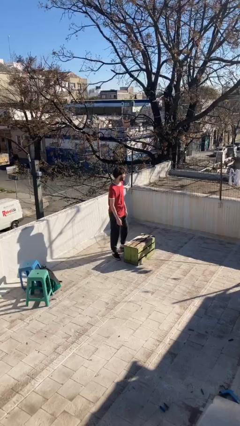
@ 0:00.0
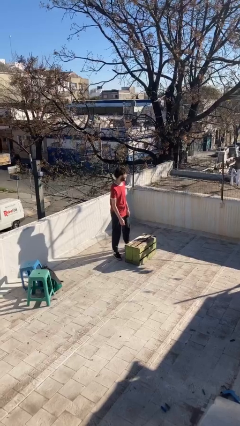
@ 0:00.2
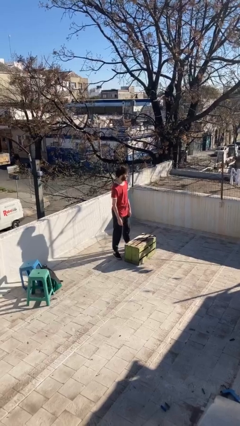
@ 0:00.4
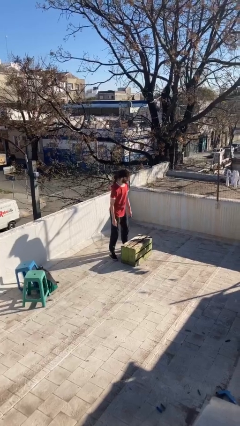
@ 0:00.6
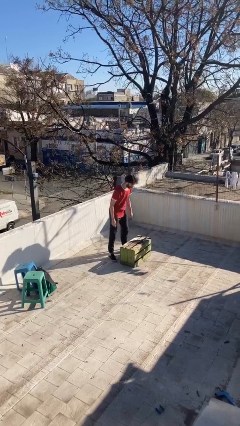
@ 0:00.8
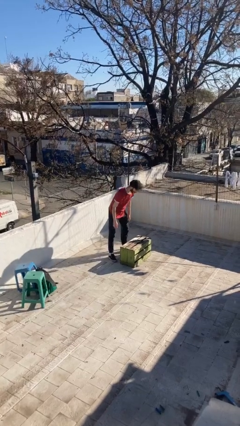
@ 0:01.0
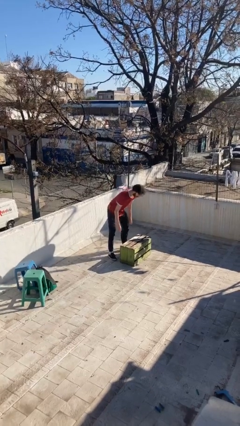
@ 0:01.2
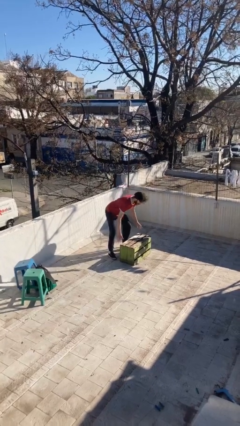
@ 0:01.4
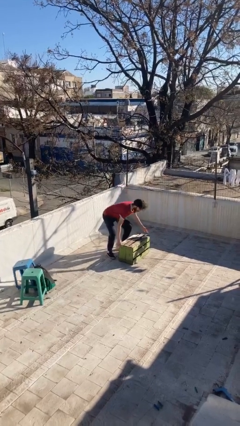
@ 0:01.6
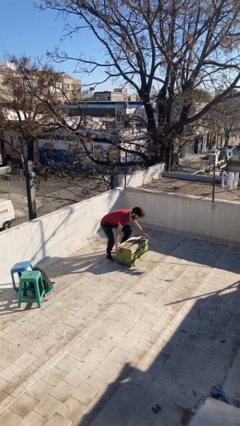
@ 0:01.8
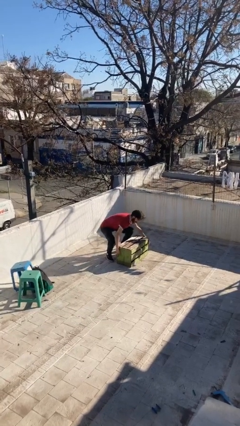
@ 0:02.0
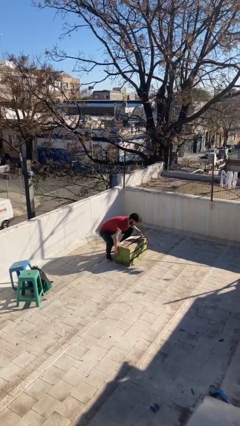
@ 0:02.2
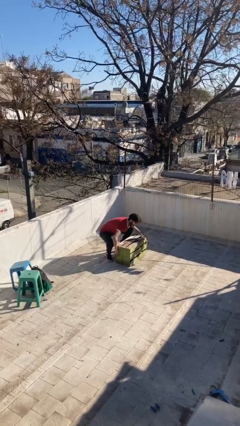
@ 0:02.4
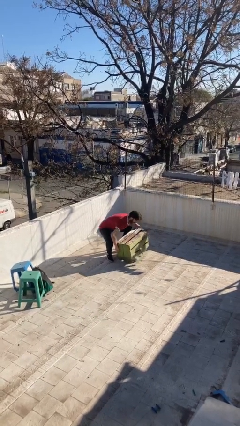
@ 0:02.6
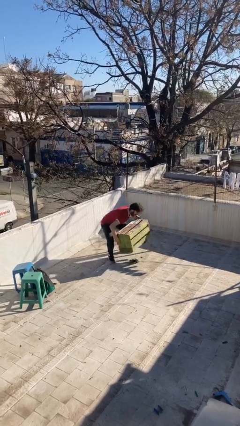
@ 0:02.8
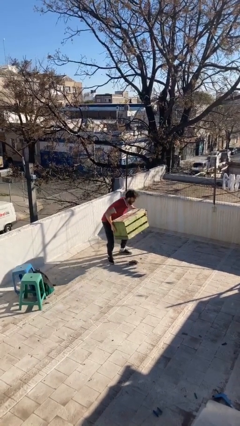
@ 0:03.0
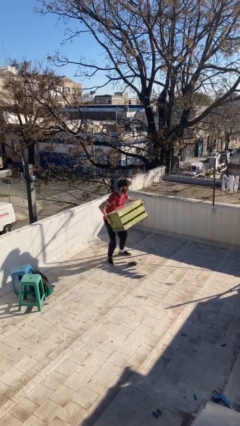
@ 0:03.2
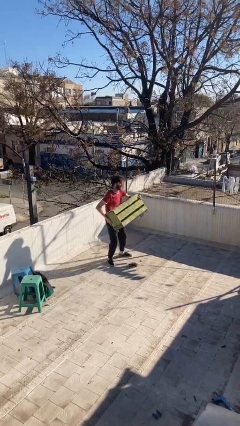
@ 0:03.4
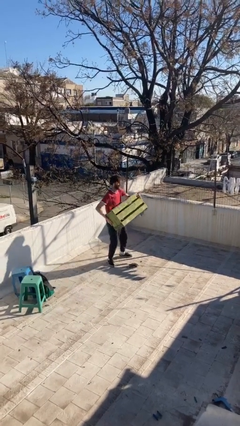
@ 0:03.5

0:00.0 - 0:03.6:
person picks up object from floor

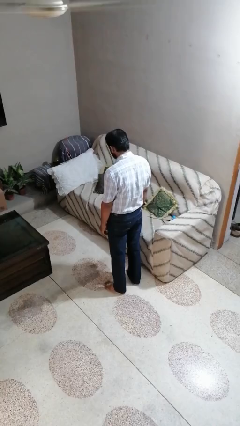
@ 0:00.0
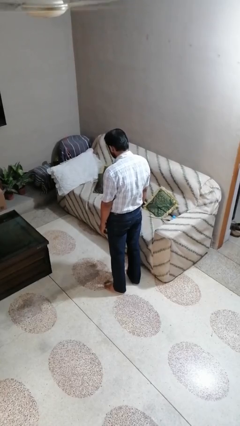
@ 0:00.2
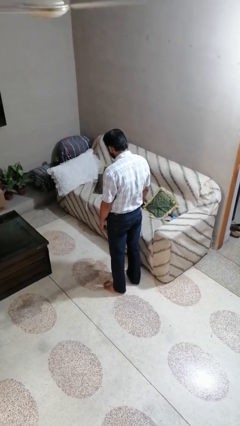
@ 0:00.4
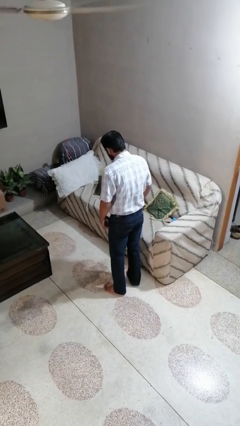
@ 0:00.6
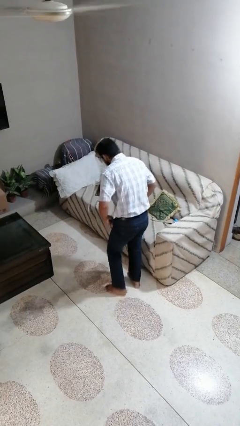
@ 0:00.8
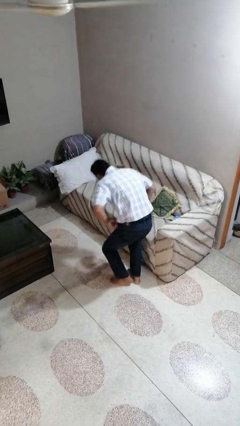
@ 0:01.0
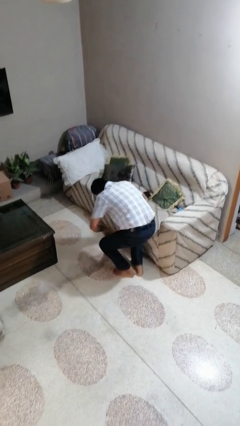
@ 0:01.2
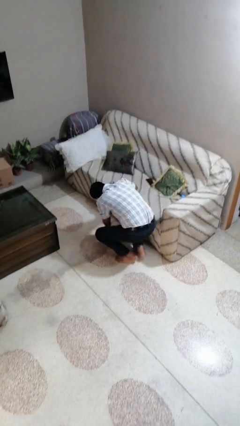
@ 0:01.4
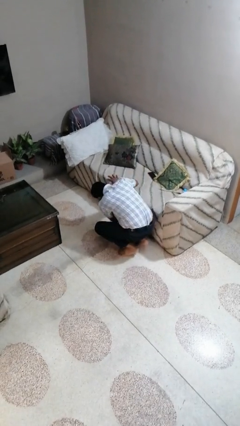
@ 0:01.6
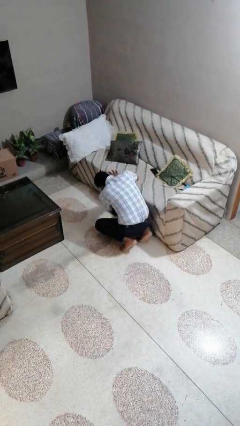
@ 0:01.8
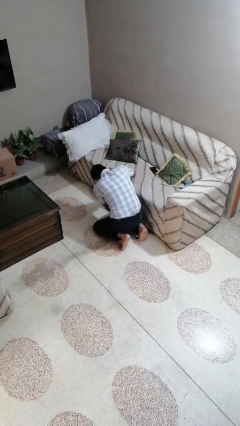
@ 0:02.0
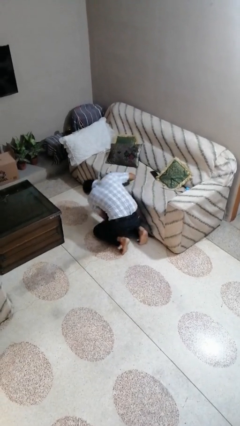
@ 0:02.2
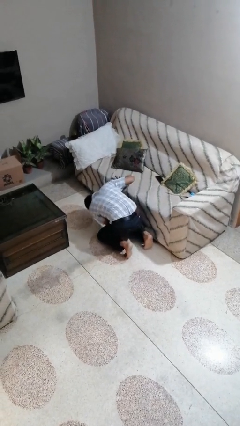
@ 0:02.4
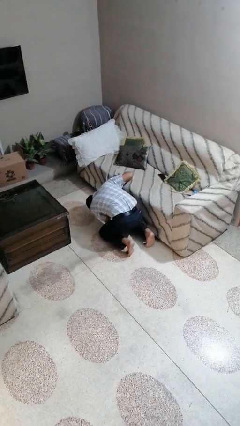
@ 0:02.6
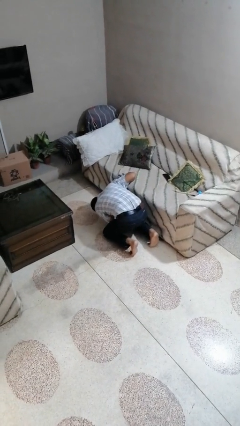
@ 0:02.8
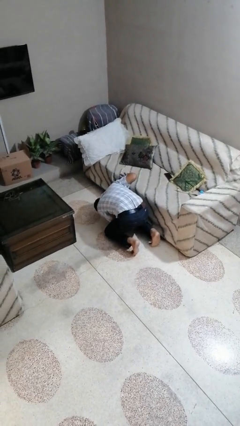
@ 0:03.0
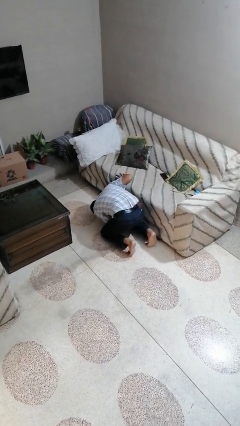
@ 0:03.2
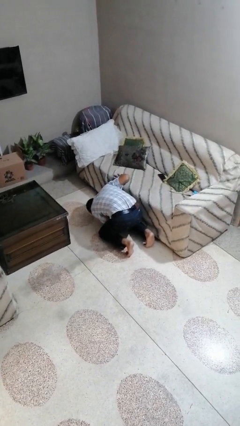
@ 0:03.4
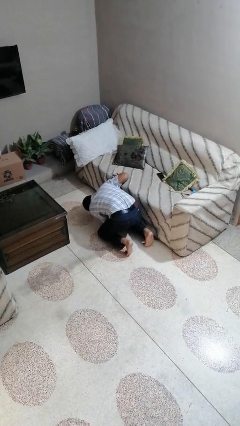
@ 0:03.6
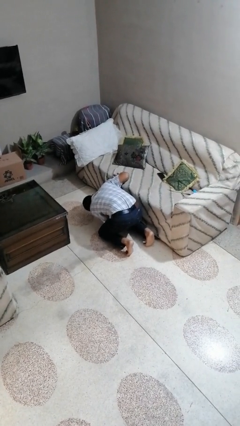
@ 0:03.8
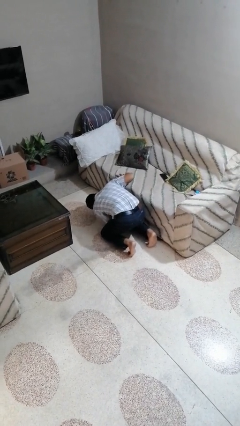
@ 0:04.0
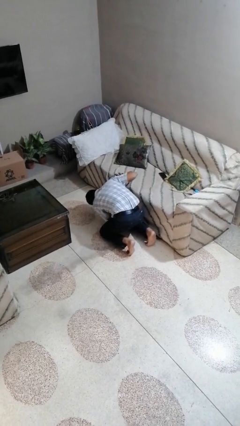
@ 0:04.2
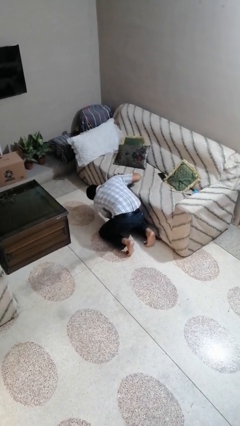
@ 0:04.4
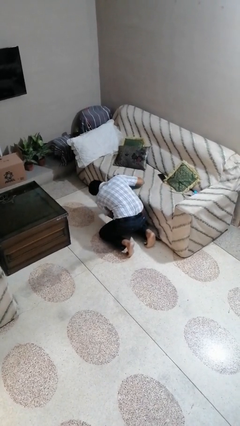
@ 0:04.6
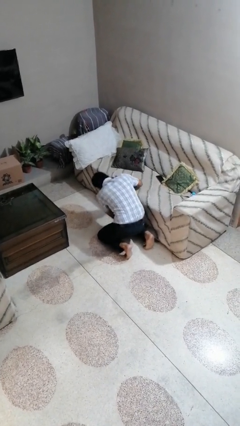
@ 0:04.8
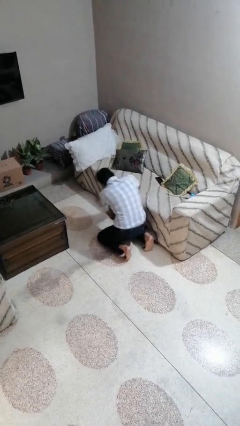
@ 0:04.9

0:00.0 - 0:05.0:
person searches under couch

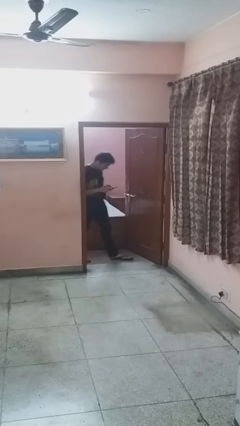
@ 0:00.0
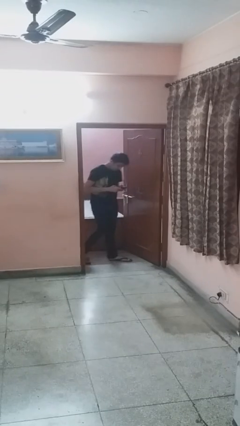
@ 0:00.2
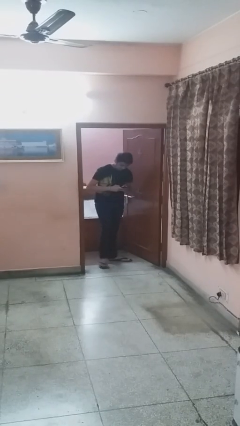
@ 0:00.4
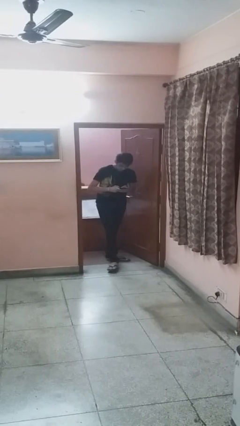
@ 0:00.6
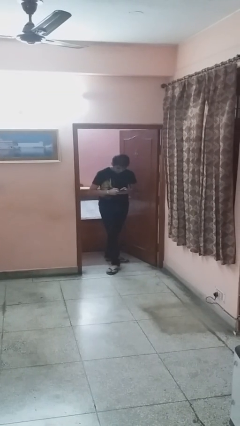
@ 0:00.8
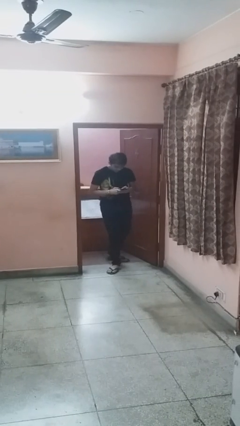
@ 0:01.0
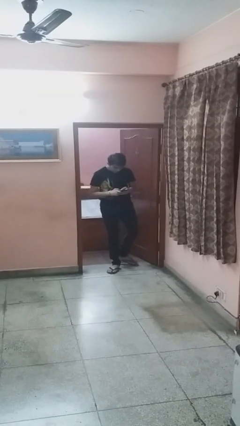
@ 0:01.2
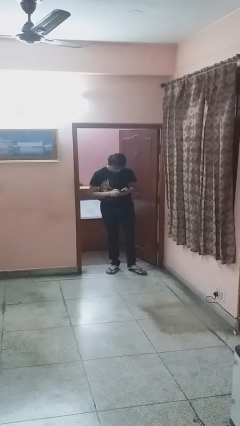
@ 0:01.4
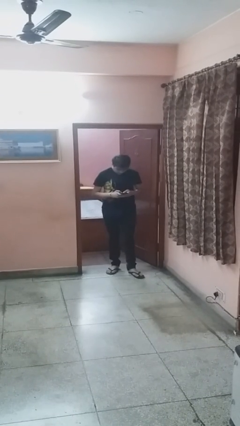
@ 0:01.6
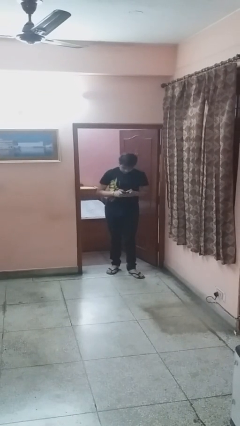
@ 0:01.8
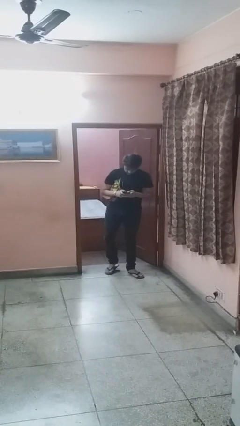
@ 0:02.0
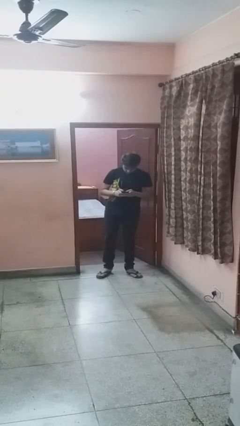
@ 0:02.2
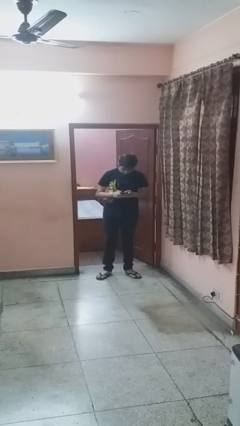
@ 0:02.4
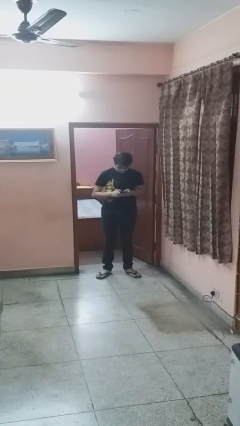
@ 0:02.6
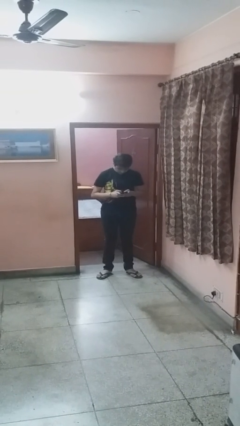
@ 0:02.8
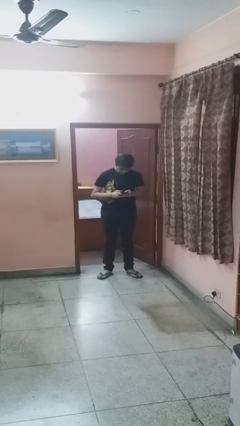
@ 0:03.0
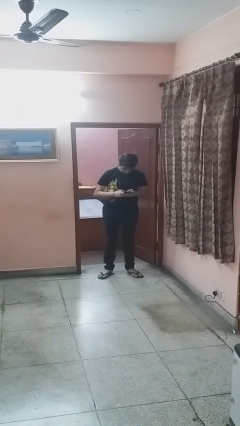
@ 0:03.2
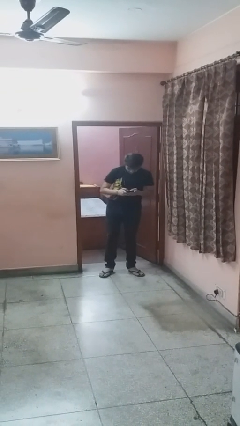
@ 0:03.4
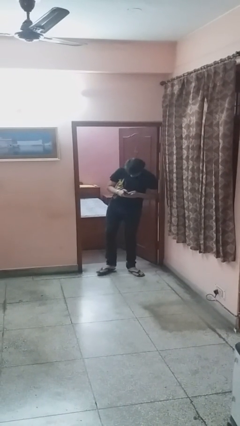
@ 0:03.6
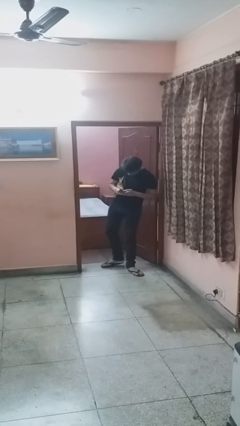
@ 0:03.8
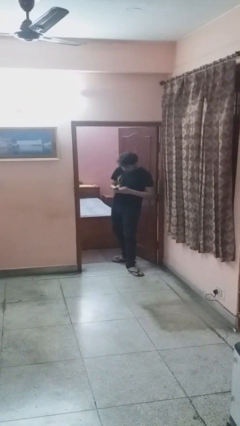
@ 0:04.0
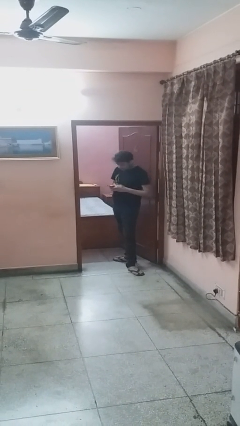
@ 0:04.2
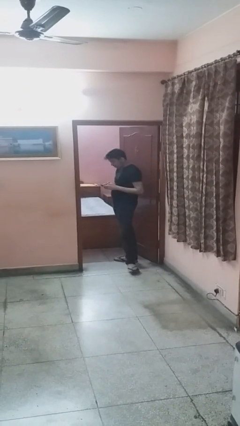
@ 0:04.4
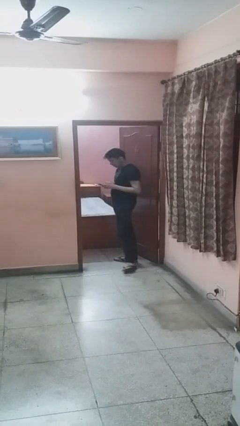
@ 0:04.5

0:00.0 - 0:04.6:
person enters scene through structure

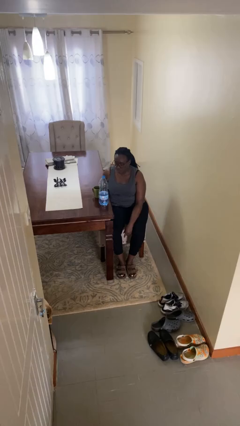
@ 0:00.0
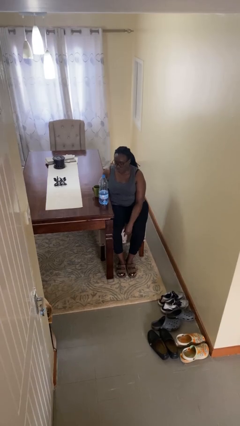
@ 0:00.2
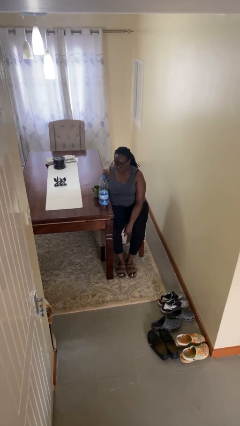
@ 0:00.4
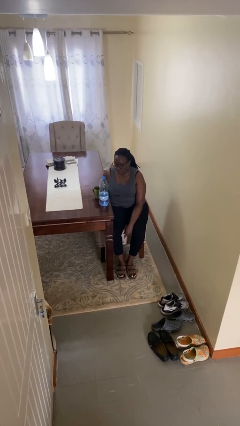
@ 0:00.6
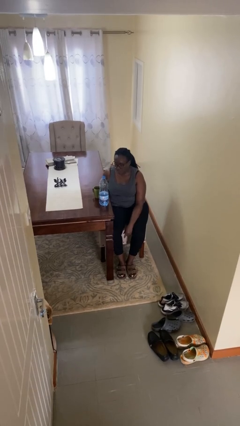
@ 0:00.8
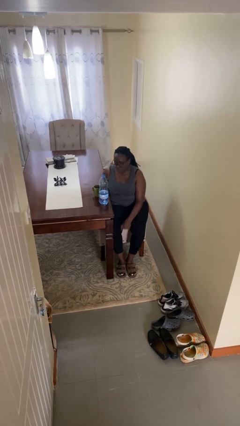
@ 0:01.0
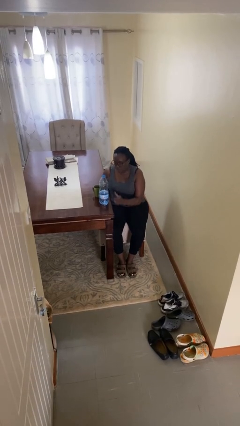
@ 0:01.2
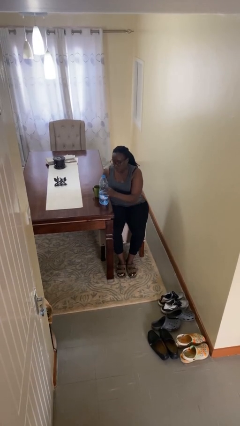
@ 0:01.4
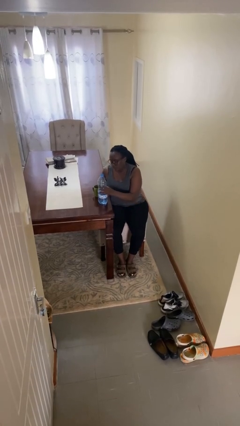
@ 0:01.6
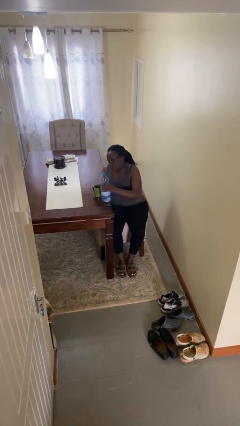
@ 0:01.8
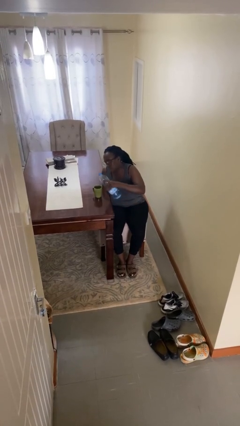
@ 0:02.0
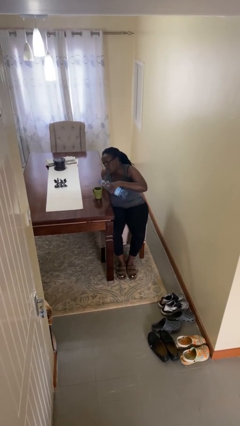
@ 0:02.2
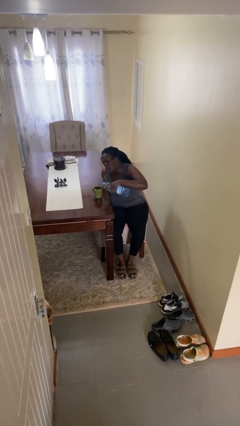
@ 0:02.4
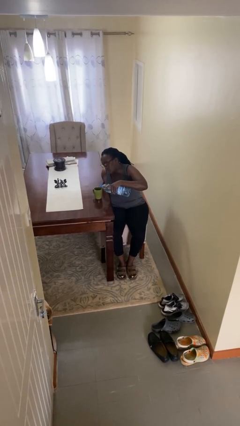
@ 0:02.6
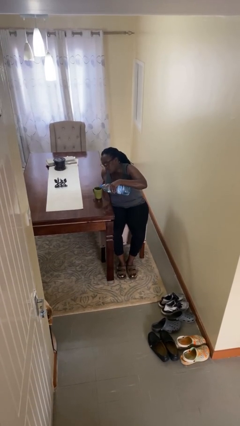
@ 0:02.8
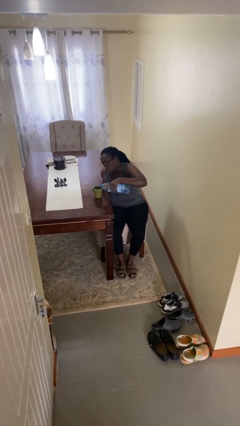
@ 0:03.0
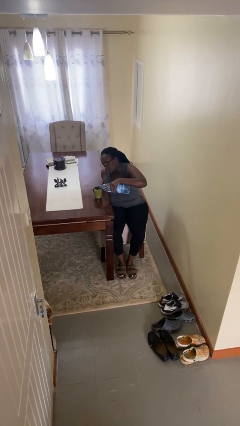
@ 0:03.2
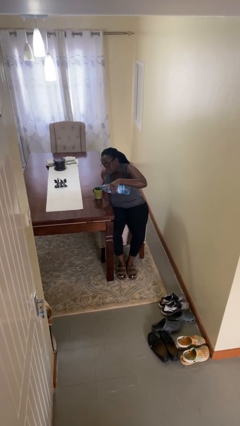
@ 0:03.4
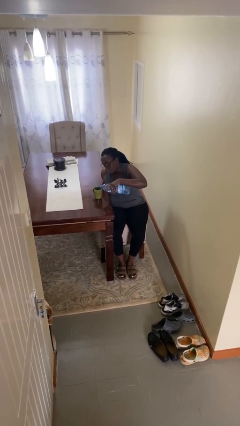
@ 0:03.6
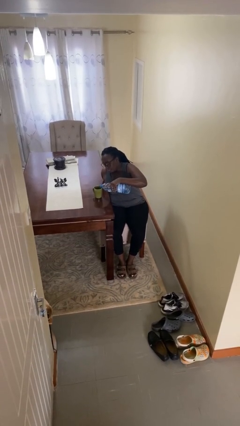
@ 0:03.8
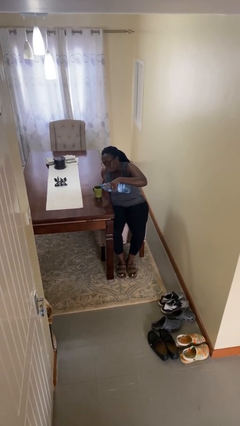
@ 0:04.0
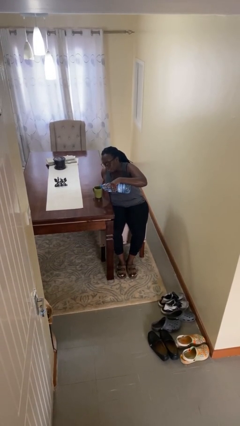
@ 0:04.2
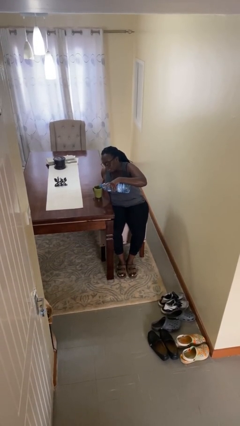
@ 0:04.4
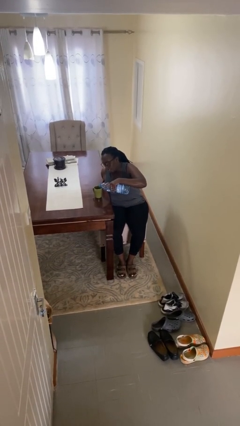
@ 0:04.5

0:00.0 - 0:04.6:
person pours liquid into cup
